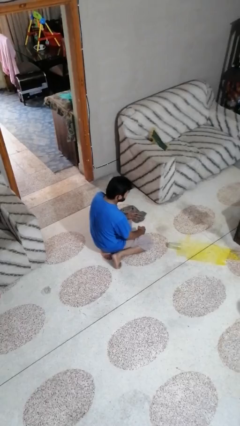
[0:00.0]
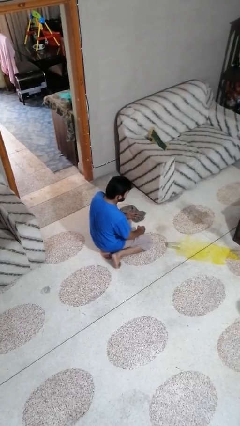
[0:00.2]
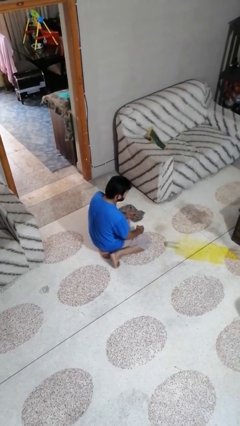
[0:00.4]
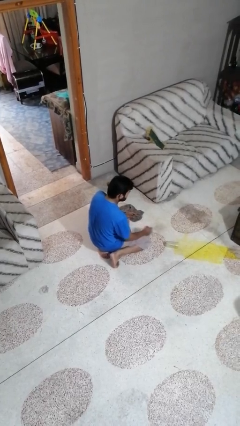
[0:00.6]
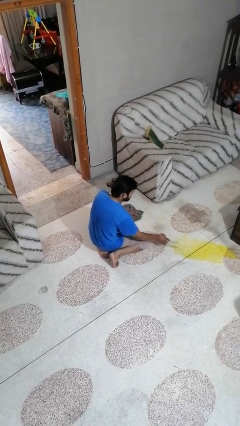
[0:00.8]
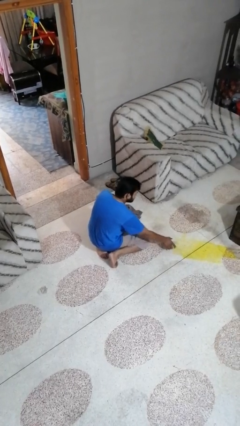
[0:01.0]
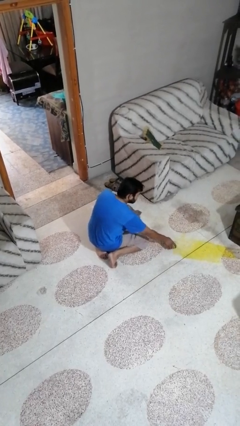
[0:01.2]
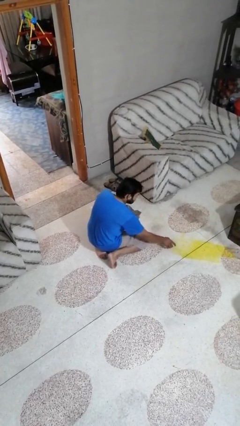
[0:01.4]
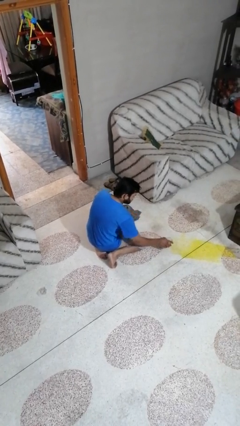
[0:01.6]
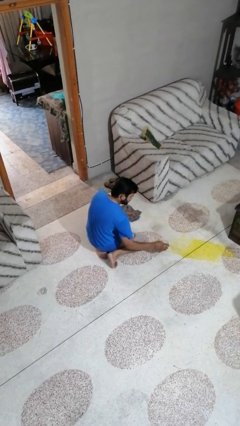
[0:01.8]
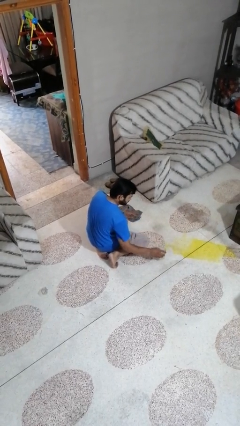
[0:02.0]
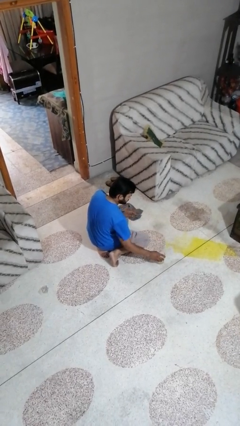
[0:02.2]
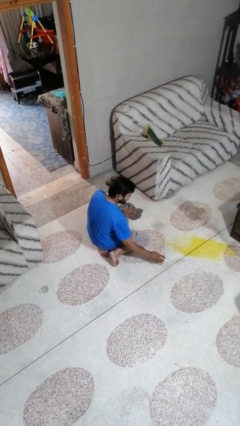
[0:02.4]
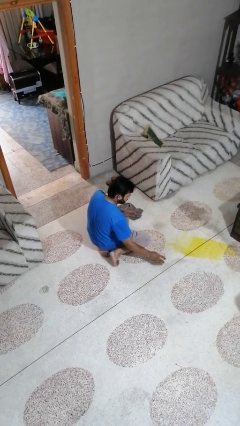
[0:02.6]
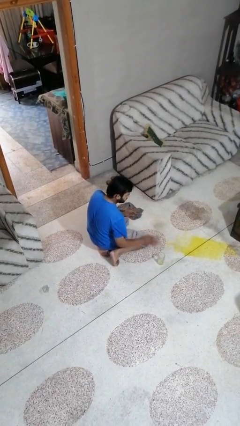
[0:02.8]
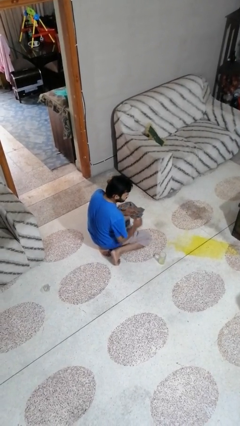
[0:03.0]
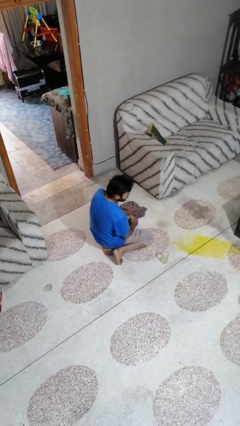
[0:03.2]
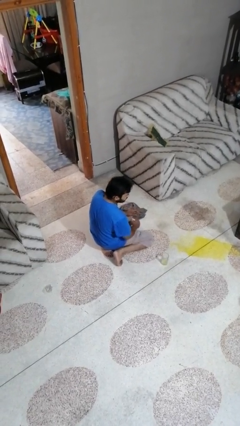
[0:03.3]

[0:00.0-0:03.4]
person sets upright glass

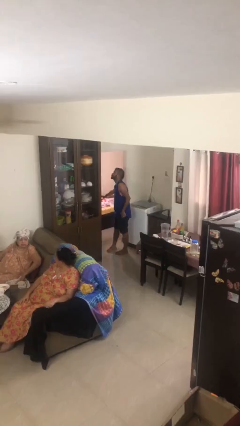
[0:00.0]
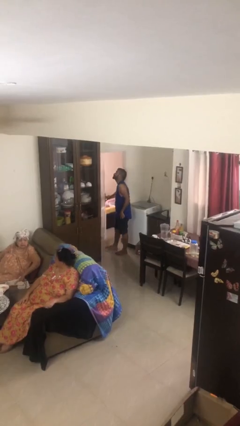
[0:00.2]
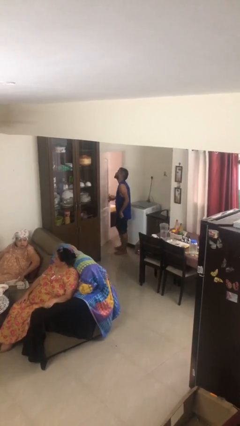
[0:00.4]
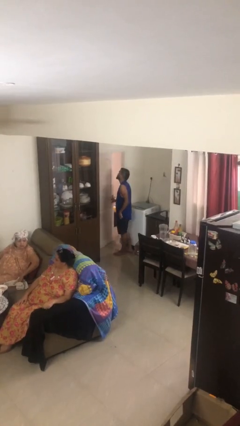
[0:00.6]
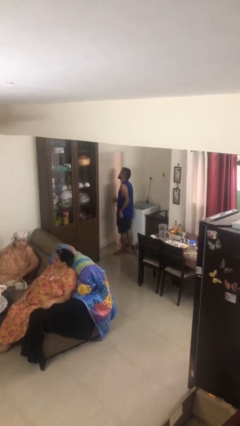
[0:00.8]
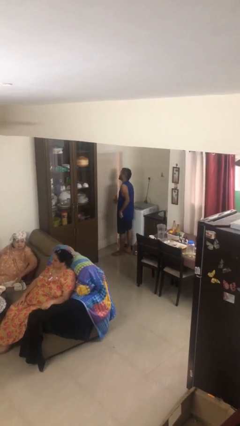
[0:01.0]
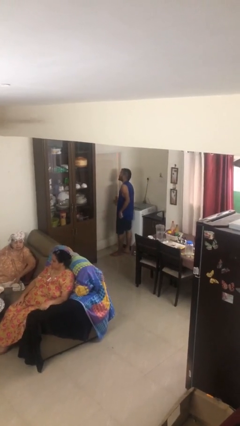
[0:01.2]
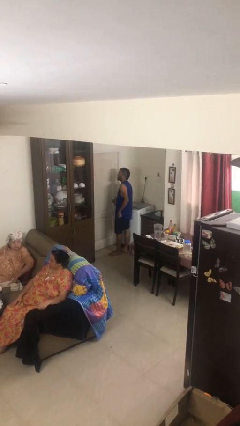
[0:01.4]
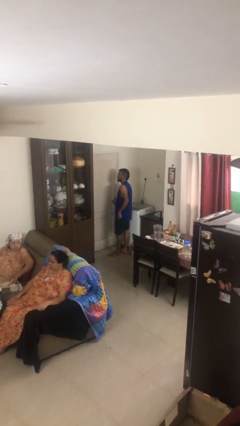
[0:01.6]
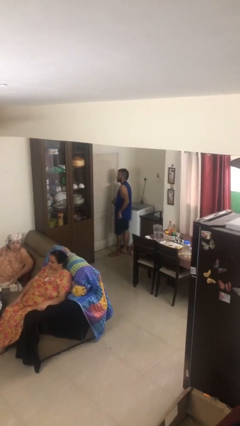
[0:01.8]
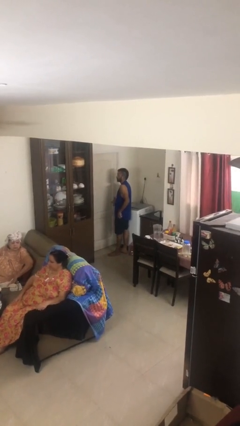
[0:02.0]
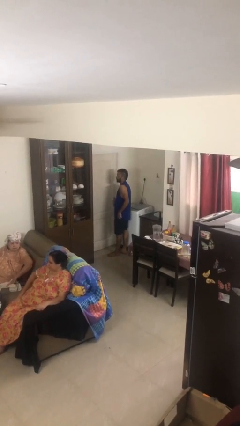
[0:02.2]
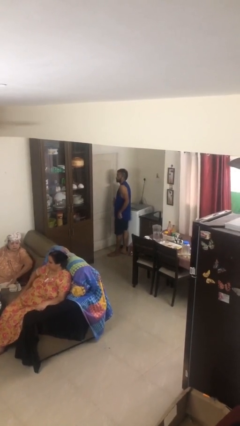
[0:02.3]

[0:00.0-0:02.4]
person closes facility door

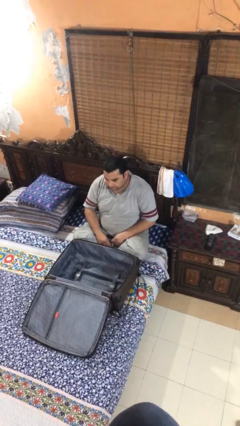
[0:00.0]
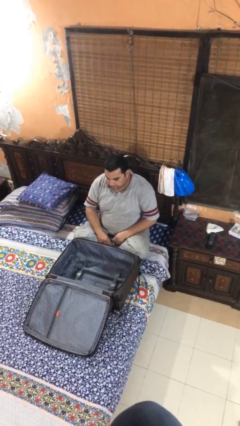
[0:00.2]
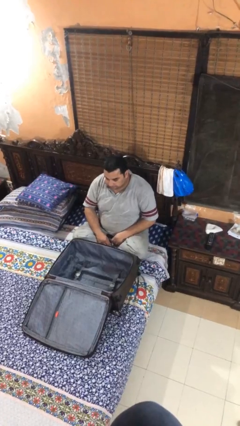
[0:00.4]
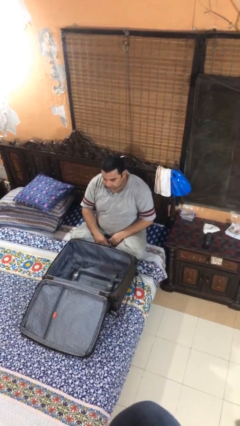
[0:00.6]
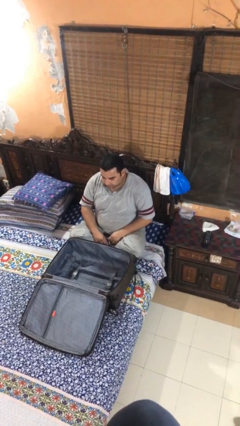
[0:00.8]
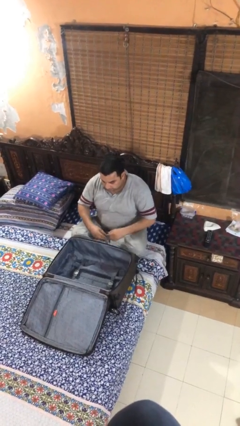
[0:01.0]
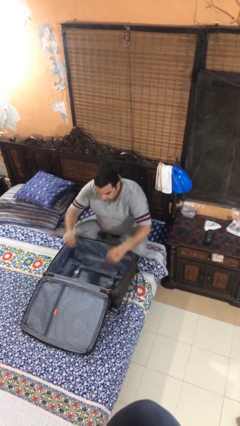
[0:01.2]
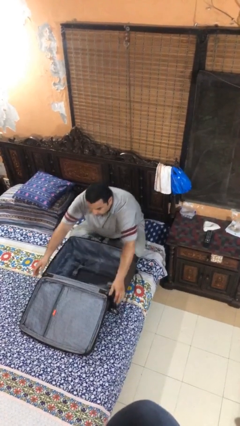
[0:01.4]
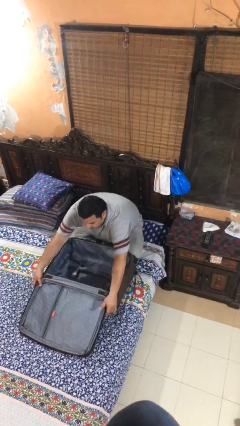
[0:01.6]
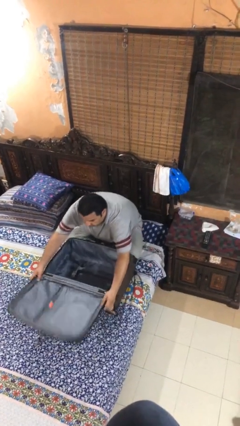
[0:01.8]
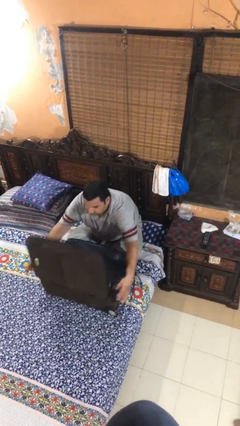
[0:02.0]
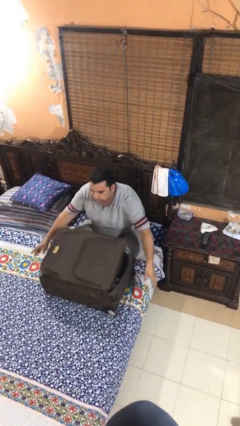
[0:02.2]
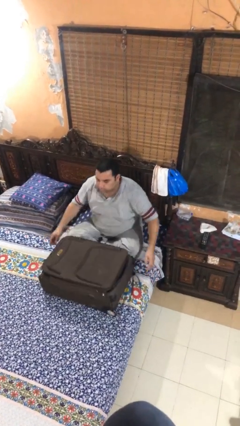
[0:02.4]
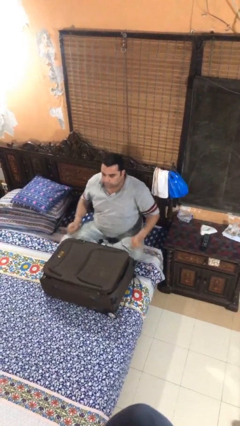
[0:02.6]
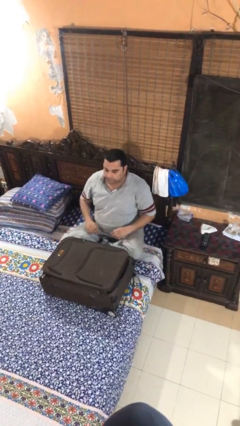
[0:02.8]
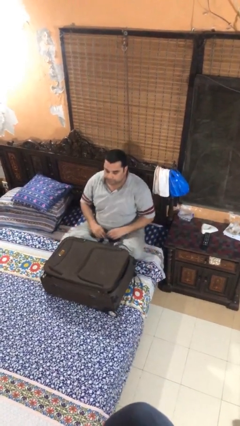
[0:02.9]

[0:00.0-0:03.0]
person closes suitcase

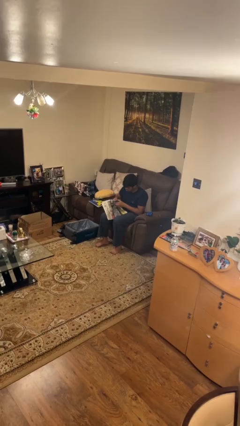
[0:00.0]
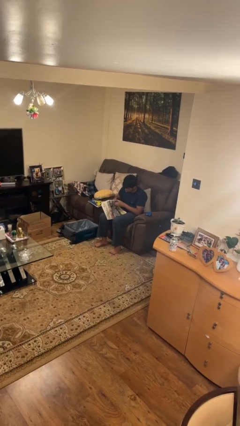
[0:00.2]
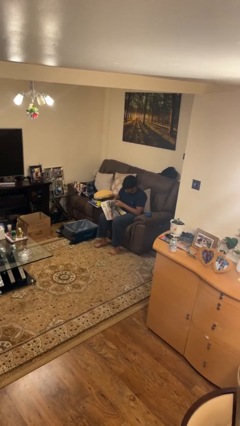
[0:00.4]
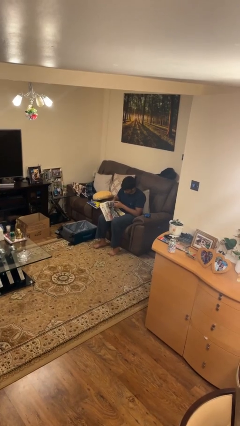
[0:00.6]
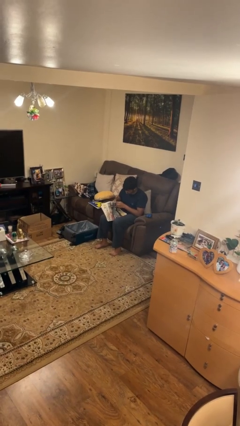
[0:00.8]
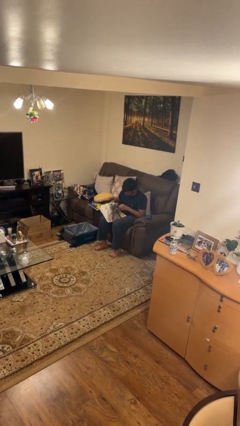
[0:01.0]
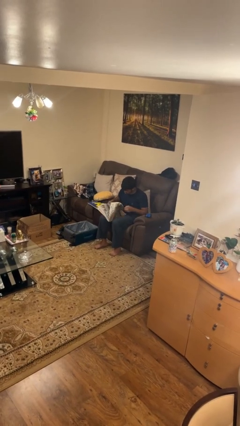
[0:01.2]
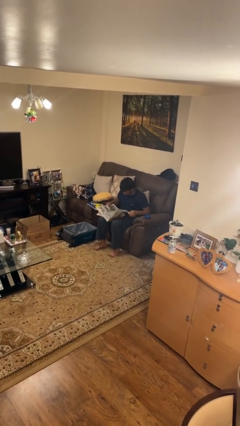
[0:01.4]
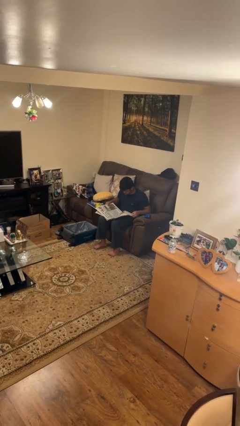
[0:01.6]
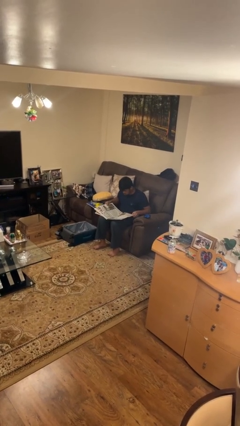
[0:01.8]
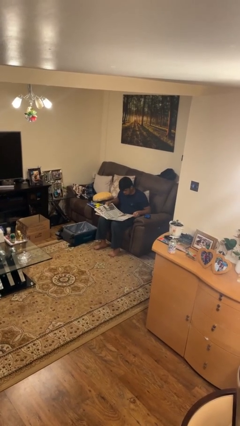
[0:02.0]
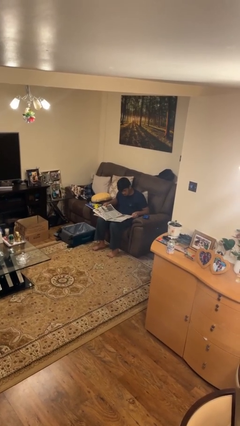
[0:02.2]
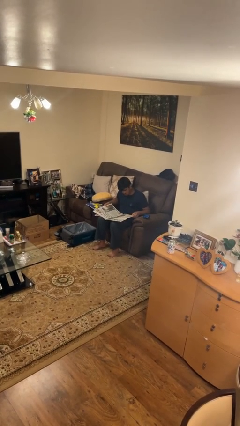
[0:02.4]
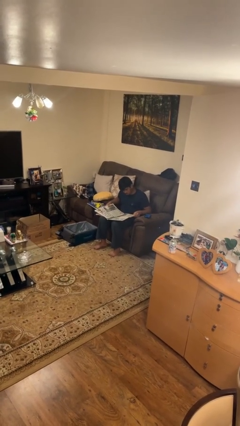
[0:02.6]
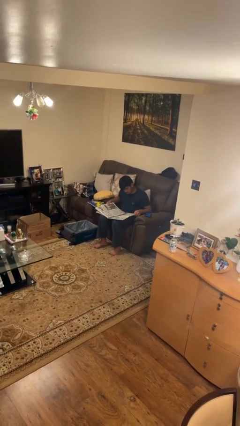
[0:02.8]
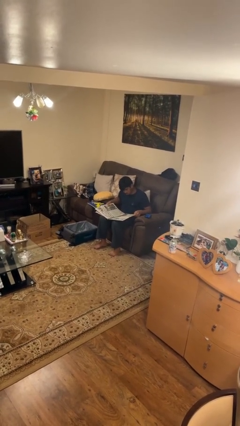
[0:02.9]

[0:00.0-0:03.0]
person reads newspaper

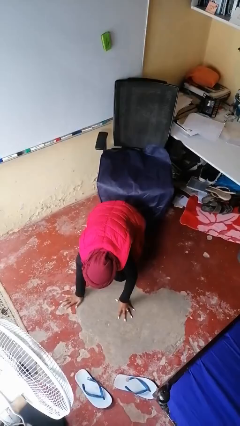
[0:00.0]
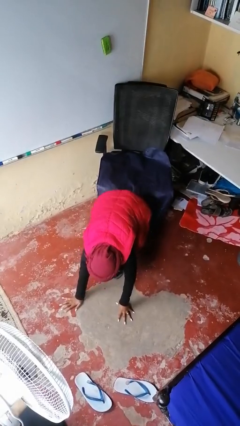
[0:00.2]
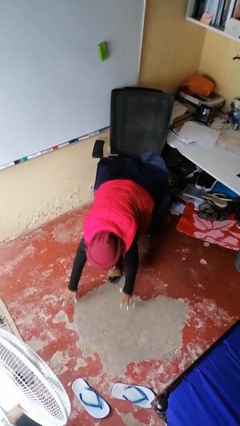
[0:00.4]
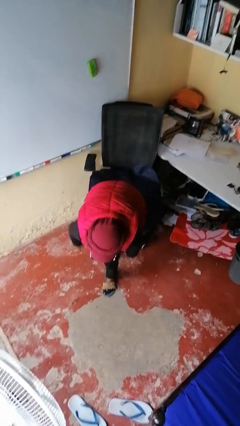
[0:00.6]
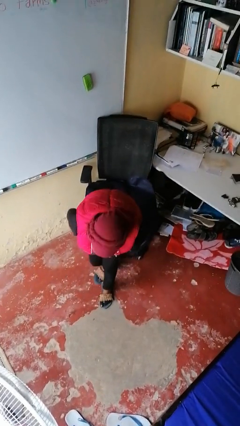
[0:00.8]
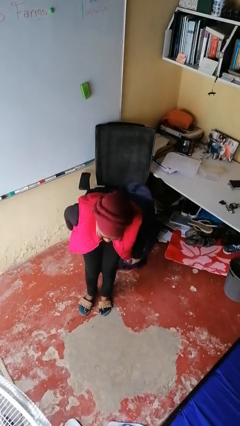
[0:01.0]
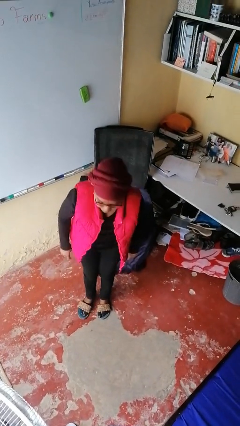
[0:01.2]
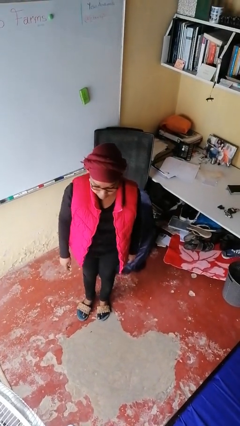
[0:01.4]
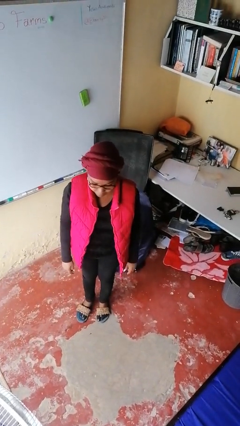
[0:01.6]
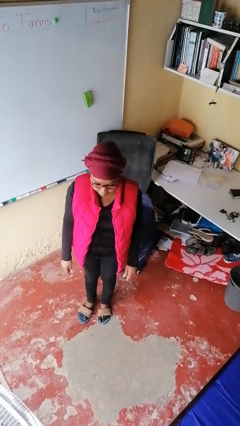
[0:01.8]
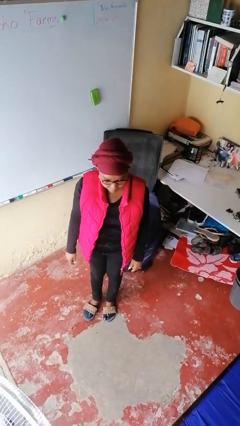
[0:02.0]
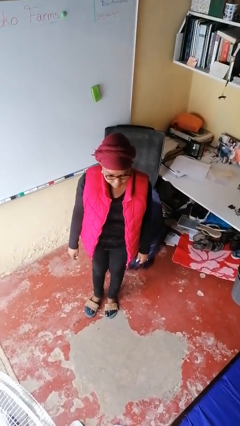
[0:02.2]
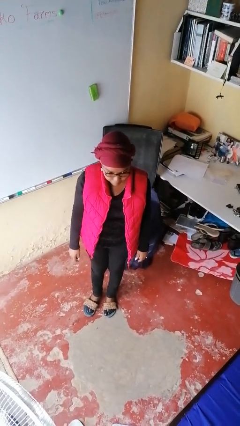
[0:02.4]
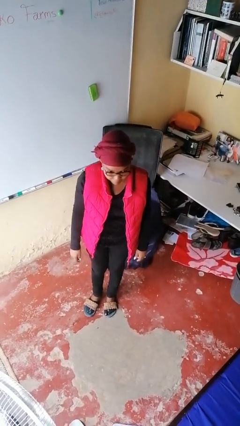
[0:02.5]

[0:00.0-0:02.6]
person stands up from floor

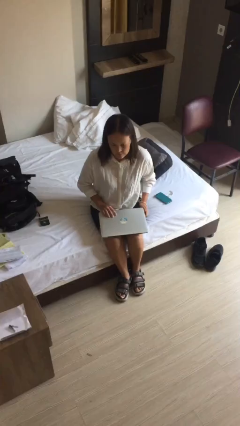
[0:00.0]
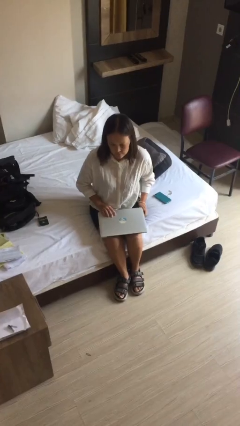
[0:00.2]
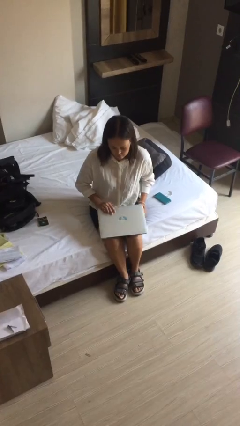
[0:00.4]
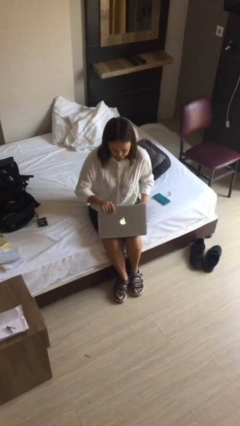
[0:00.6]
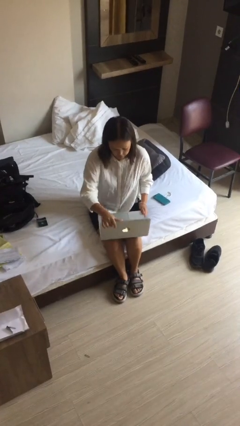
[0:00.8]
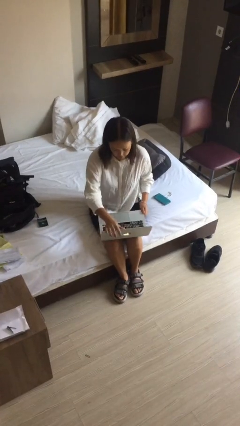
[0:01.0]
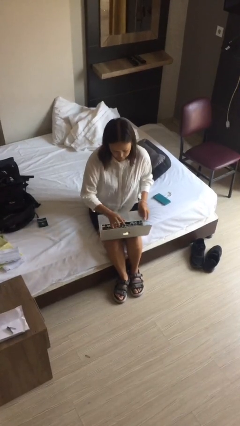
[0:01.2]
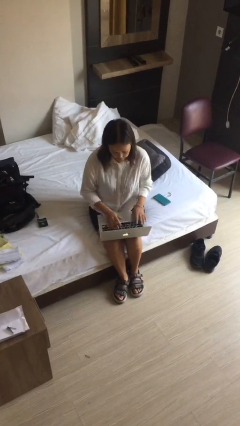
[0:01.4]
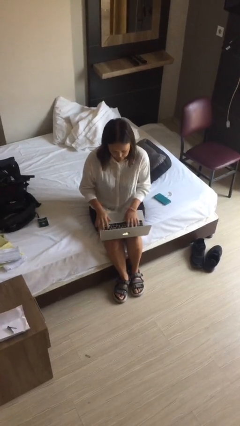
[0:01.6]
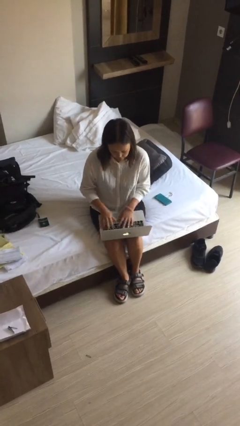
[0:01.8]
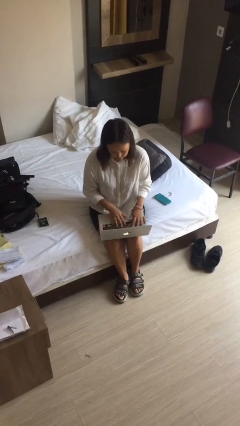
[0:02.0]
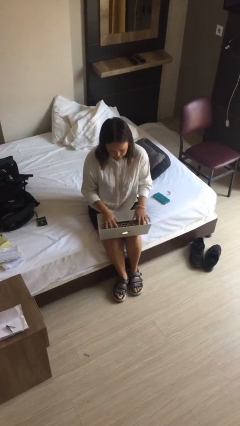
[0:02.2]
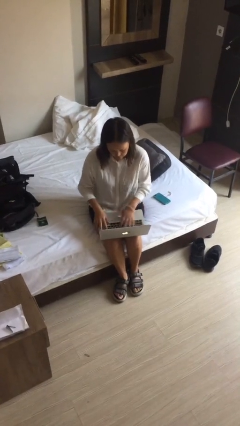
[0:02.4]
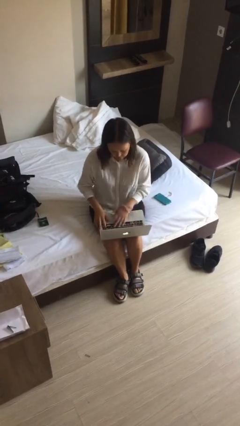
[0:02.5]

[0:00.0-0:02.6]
person opens laptop
